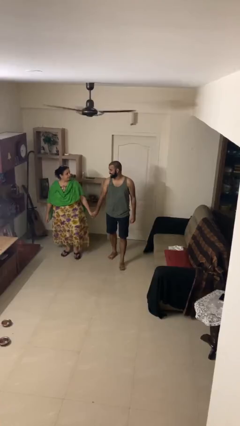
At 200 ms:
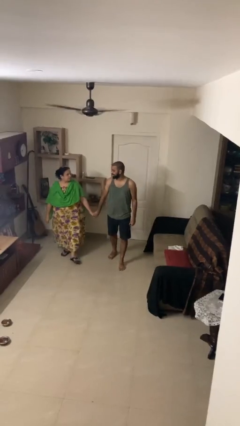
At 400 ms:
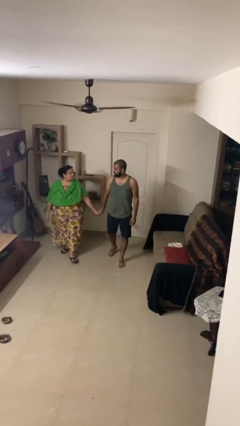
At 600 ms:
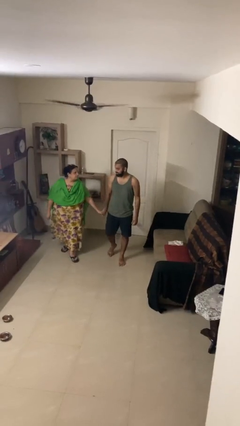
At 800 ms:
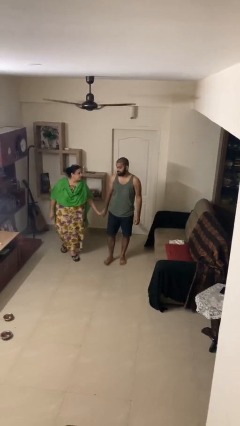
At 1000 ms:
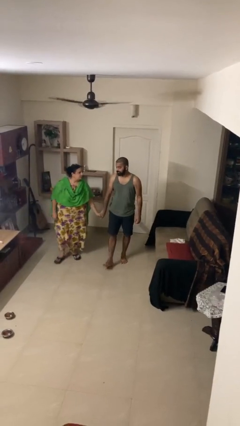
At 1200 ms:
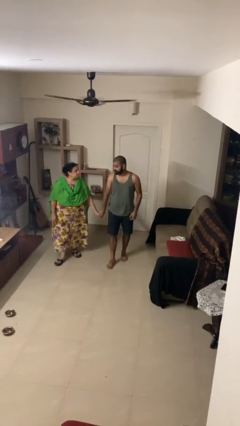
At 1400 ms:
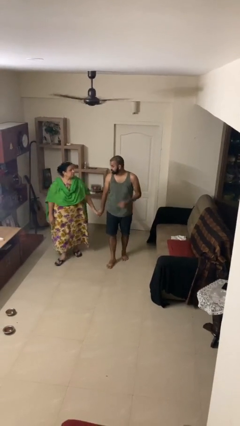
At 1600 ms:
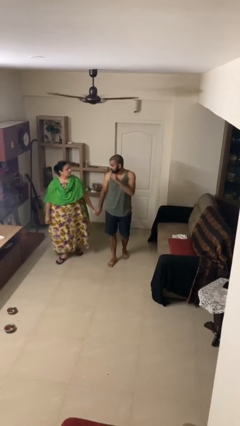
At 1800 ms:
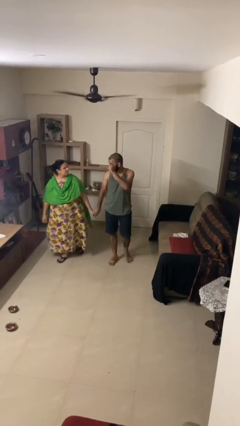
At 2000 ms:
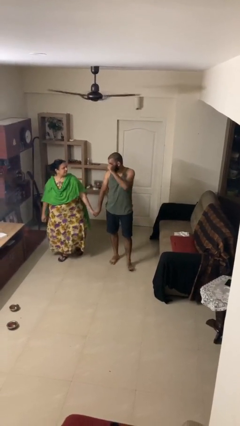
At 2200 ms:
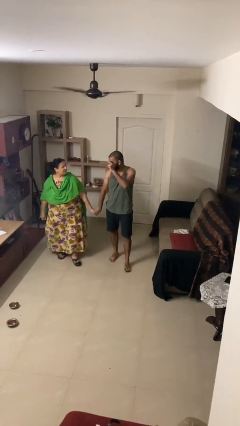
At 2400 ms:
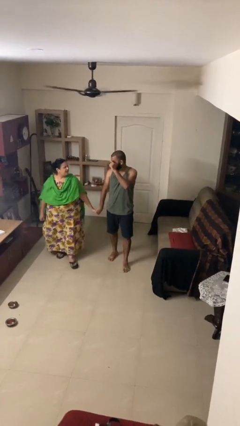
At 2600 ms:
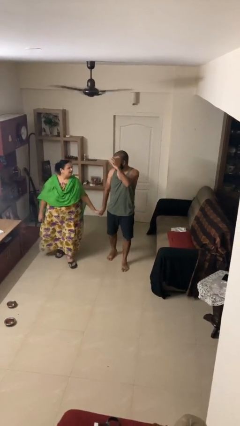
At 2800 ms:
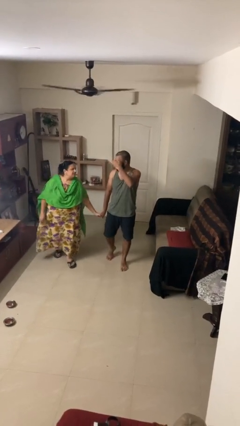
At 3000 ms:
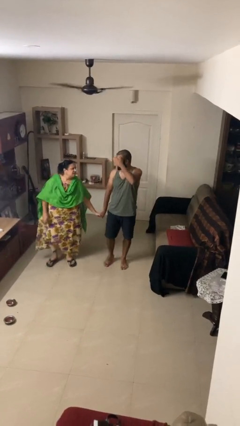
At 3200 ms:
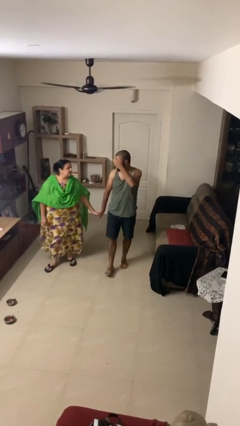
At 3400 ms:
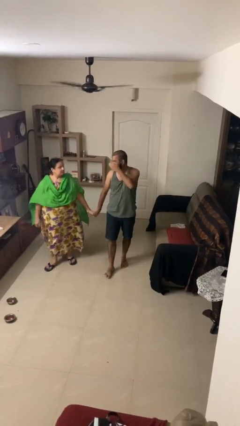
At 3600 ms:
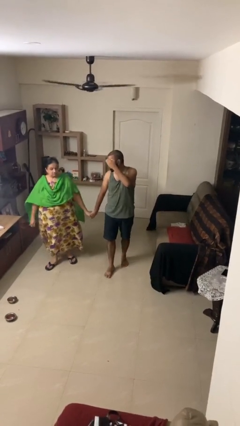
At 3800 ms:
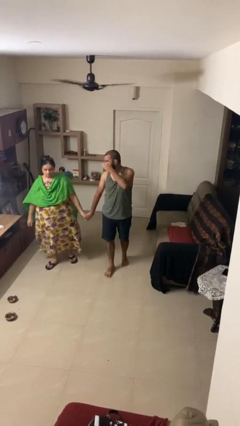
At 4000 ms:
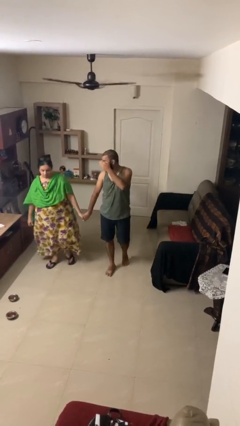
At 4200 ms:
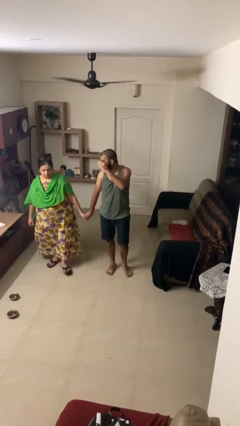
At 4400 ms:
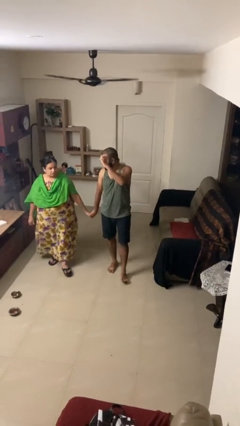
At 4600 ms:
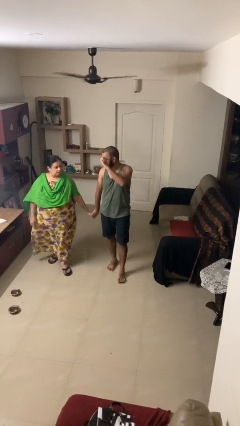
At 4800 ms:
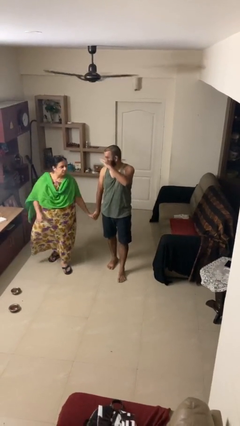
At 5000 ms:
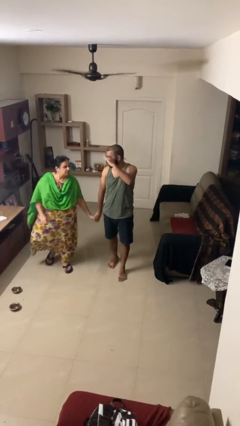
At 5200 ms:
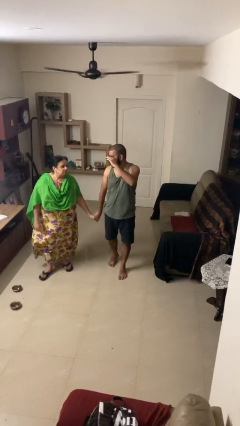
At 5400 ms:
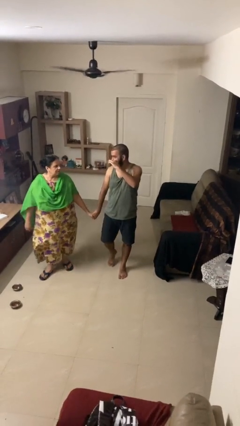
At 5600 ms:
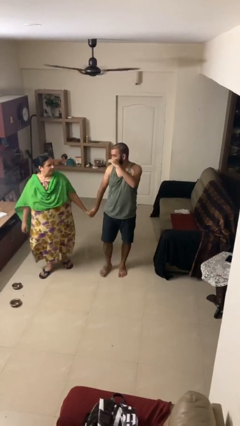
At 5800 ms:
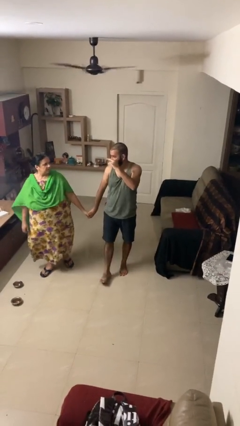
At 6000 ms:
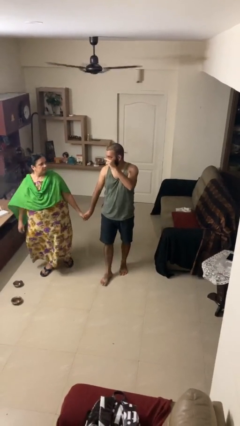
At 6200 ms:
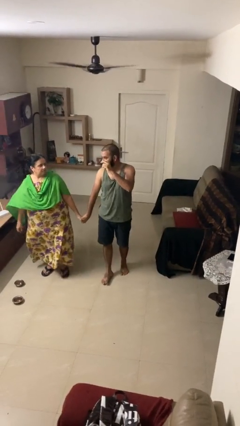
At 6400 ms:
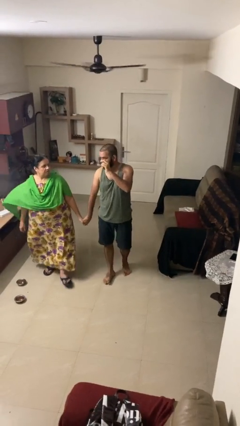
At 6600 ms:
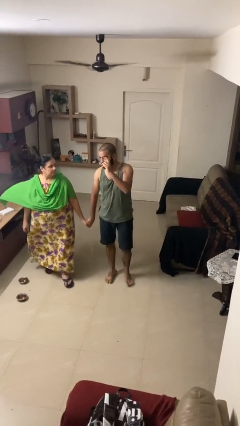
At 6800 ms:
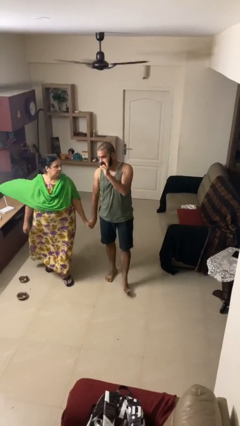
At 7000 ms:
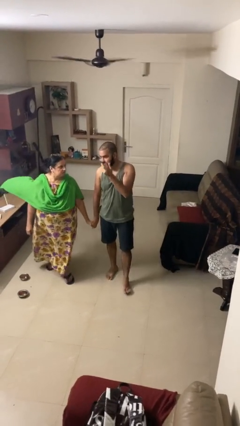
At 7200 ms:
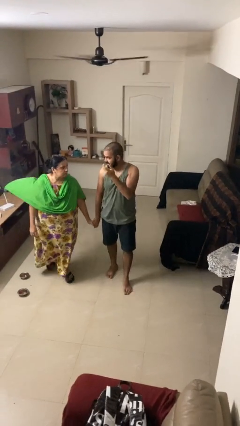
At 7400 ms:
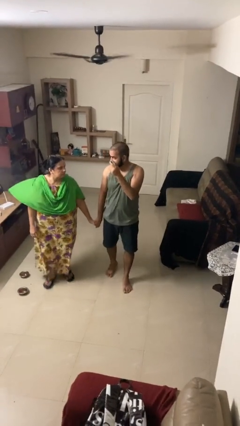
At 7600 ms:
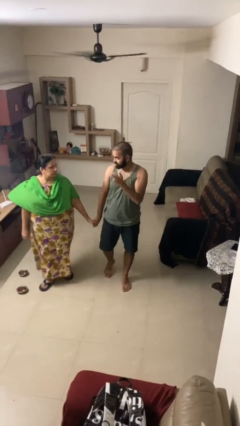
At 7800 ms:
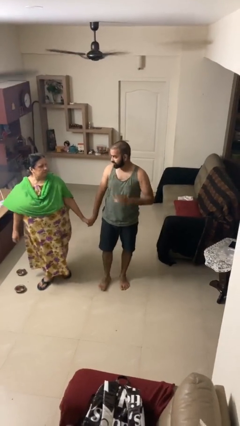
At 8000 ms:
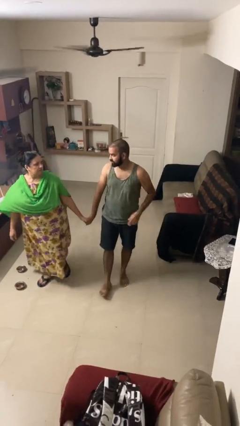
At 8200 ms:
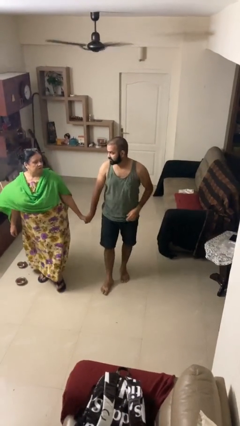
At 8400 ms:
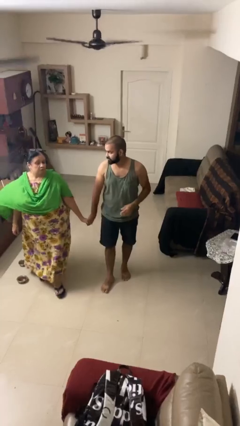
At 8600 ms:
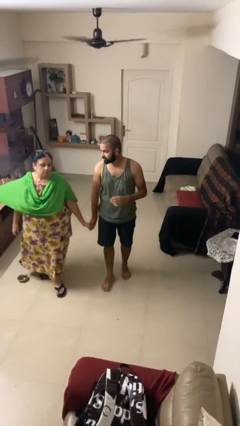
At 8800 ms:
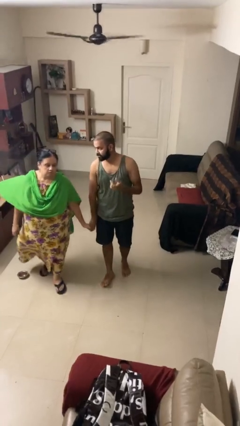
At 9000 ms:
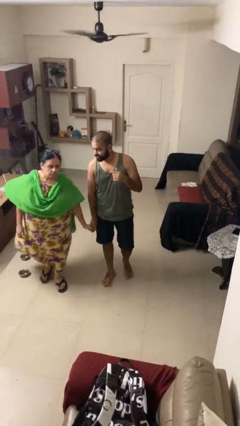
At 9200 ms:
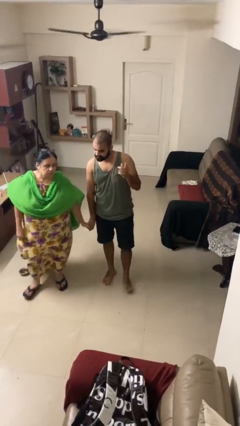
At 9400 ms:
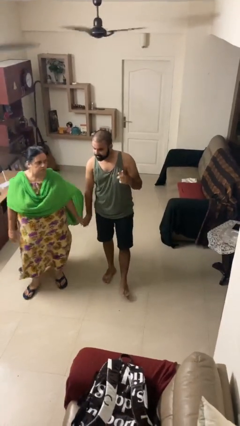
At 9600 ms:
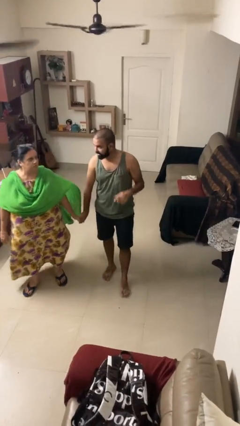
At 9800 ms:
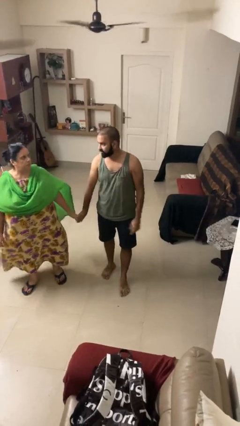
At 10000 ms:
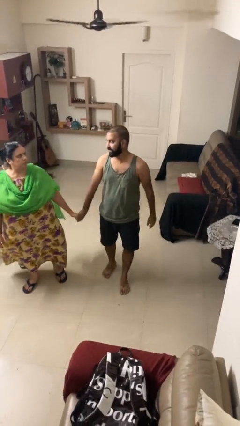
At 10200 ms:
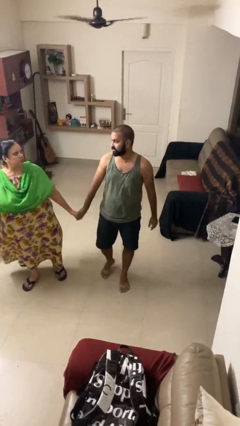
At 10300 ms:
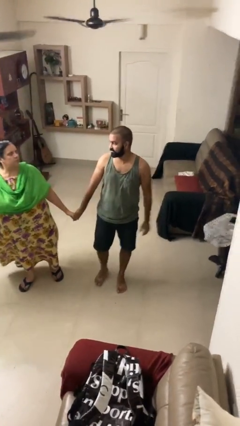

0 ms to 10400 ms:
person holds hand

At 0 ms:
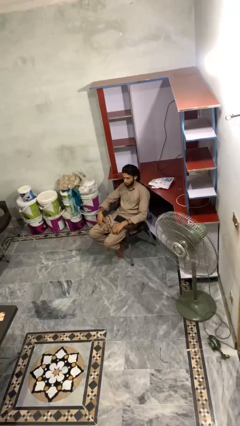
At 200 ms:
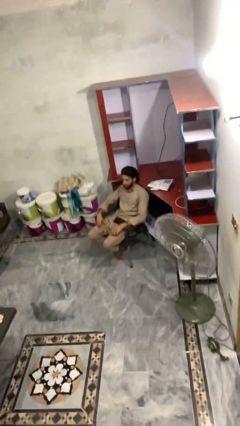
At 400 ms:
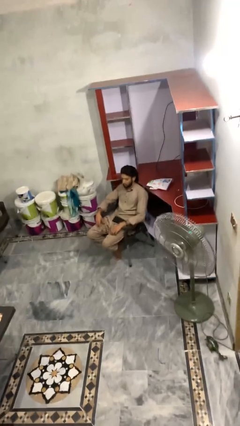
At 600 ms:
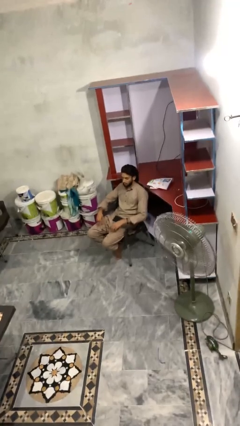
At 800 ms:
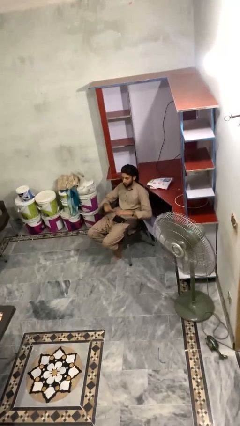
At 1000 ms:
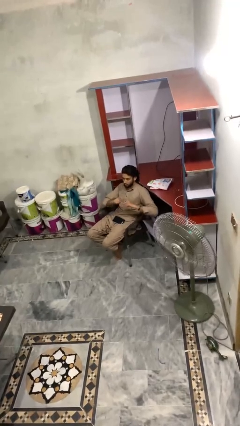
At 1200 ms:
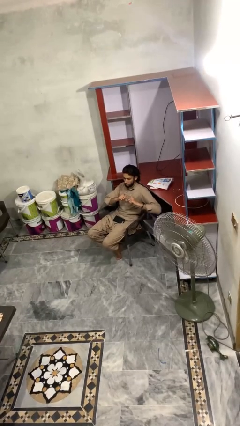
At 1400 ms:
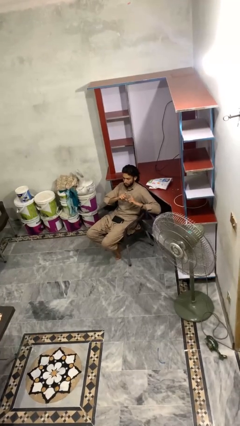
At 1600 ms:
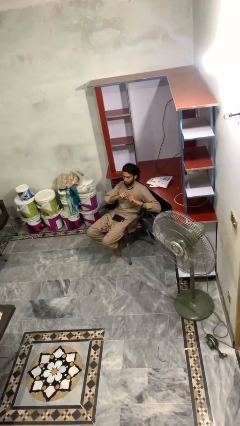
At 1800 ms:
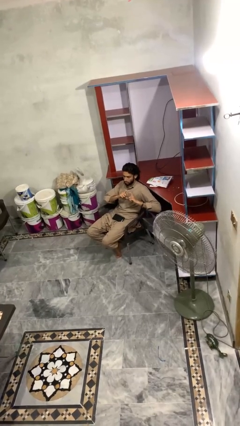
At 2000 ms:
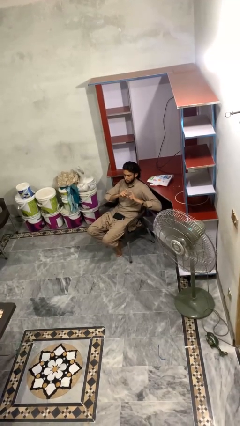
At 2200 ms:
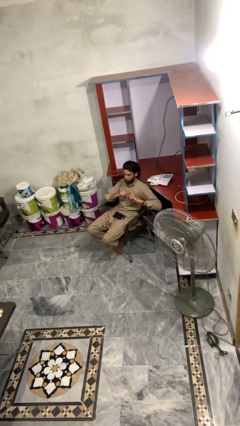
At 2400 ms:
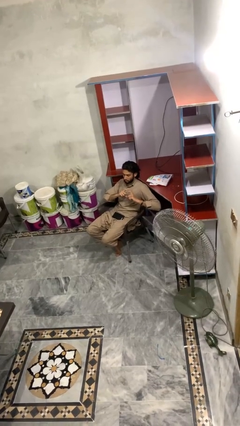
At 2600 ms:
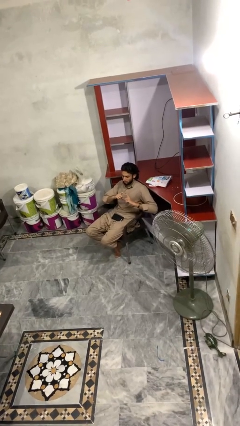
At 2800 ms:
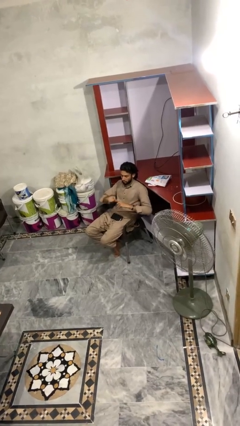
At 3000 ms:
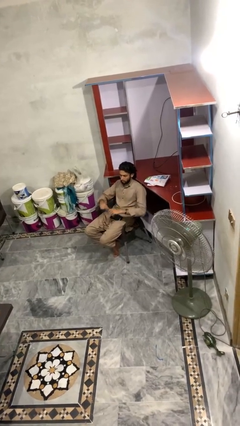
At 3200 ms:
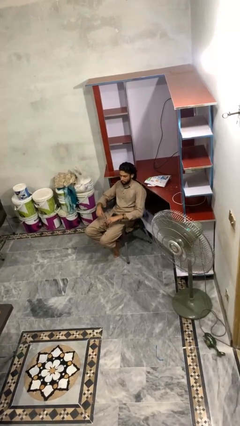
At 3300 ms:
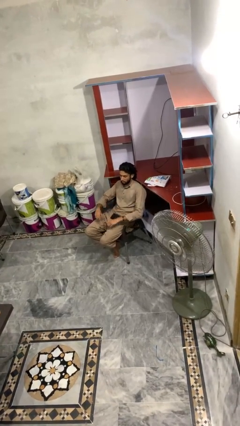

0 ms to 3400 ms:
person gestures heart

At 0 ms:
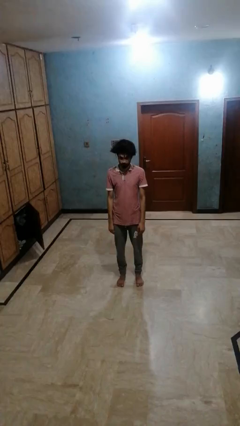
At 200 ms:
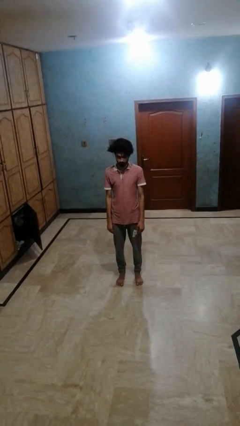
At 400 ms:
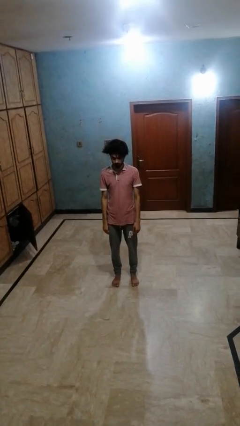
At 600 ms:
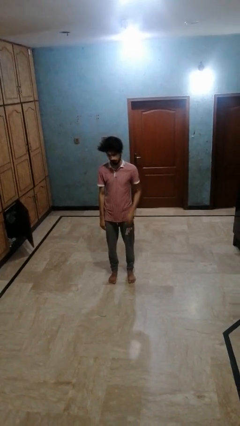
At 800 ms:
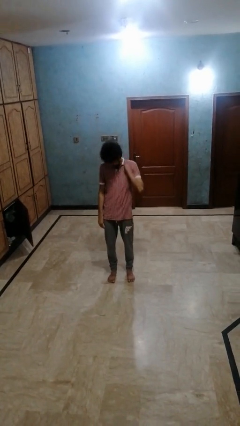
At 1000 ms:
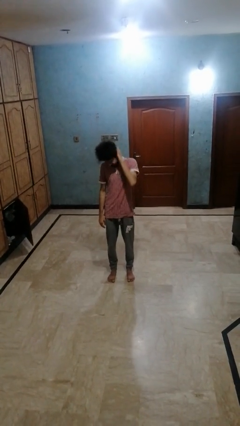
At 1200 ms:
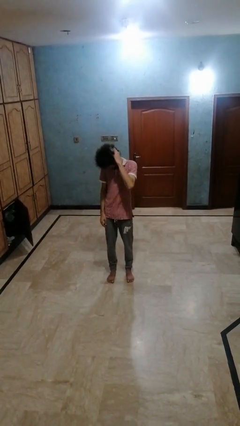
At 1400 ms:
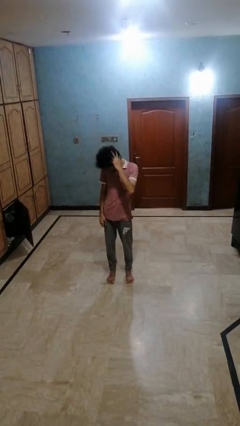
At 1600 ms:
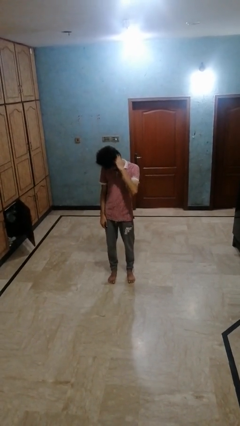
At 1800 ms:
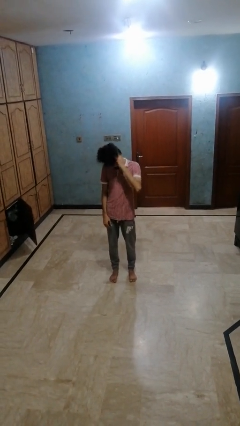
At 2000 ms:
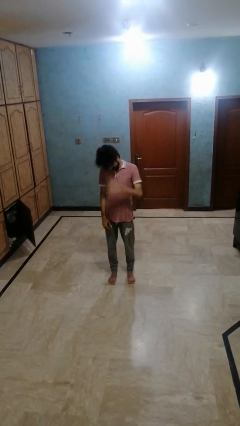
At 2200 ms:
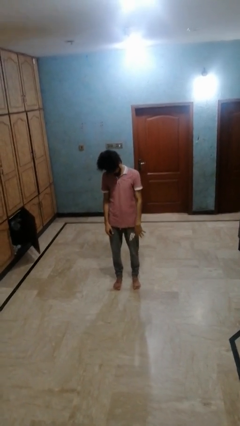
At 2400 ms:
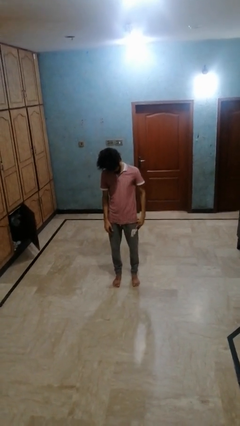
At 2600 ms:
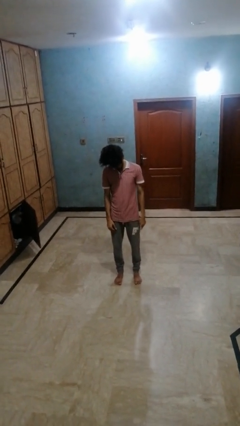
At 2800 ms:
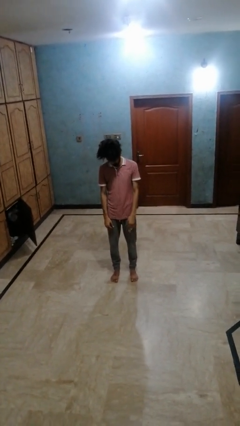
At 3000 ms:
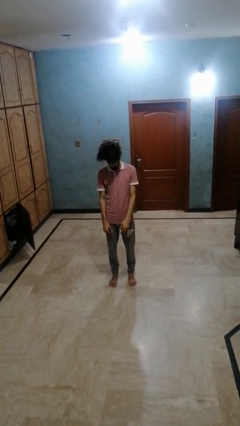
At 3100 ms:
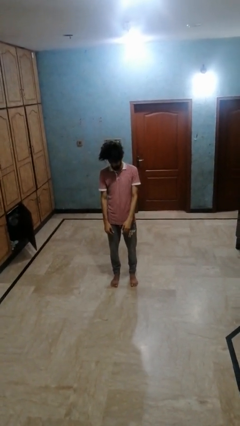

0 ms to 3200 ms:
person rubs neck

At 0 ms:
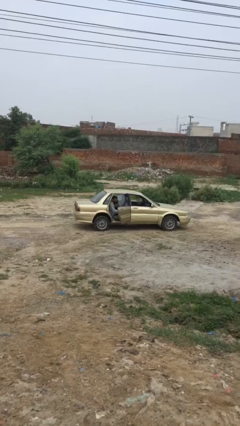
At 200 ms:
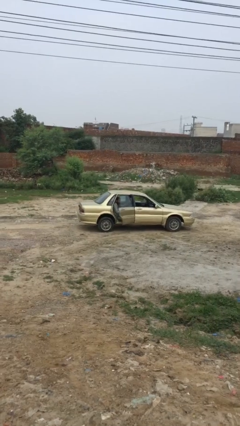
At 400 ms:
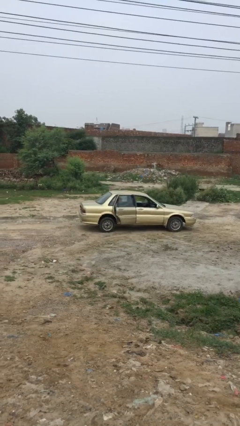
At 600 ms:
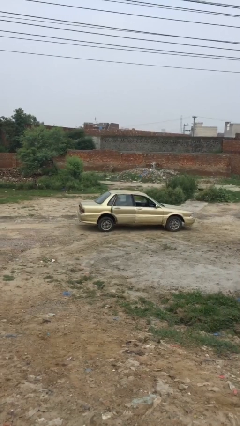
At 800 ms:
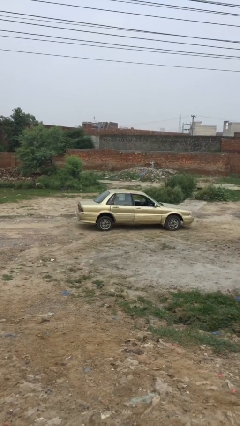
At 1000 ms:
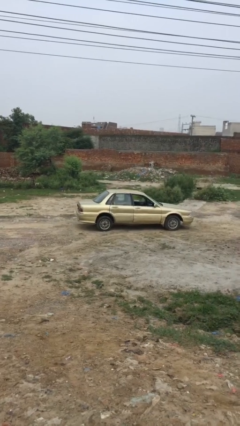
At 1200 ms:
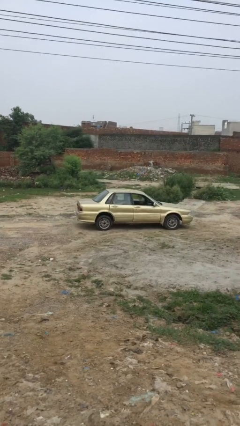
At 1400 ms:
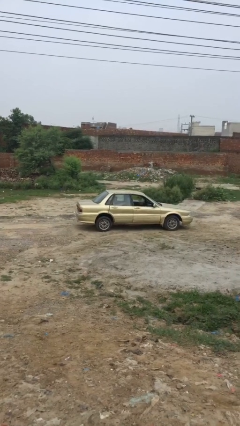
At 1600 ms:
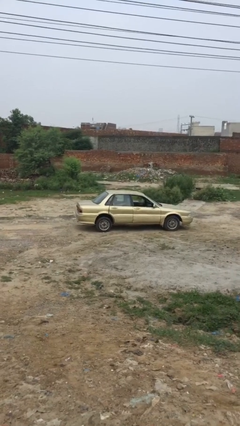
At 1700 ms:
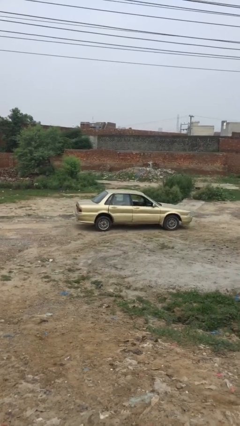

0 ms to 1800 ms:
person closes car door
